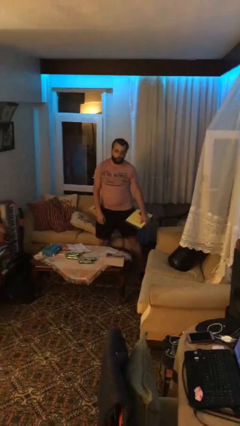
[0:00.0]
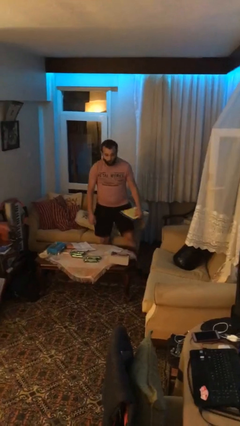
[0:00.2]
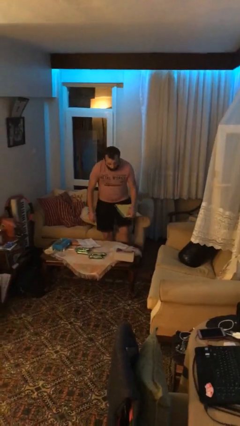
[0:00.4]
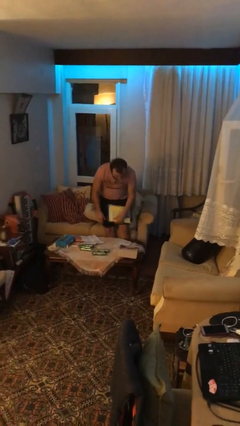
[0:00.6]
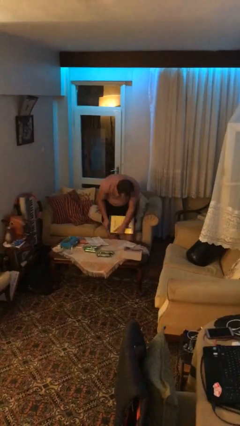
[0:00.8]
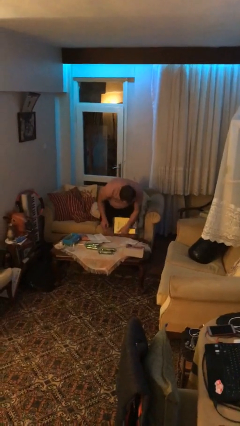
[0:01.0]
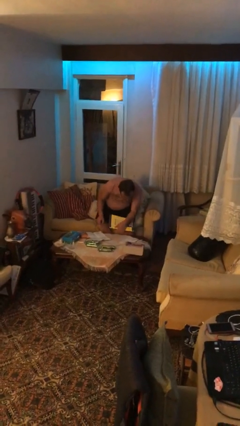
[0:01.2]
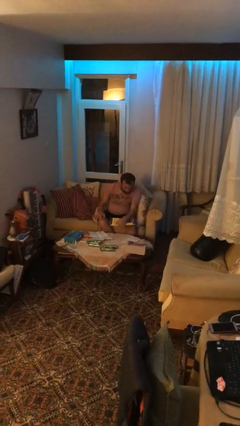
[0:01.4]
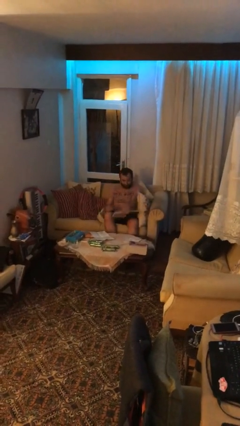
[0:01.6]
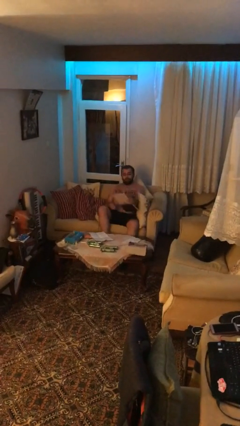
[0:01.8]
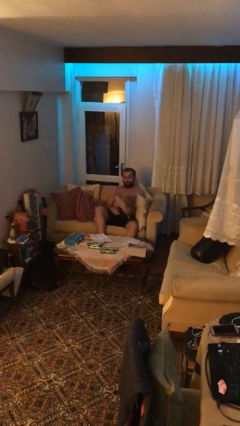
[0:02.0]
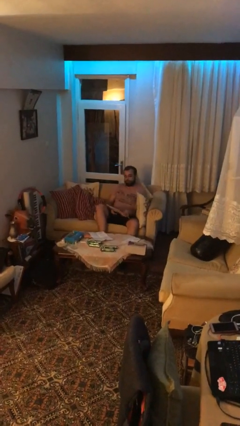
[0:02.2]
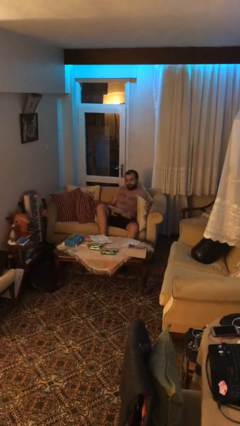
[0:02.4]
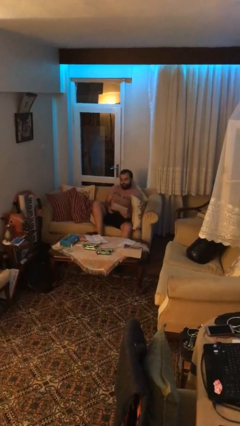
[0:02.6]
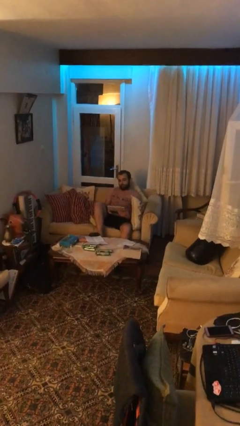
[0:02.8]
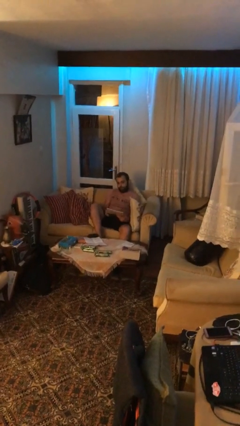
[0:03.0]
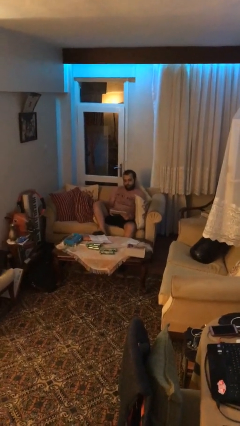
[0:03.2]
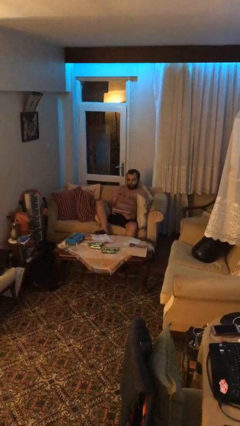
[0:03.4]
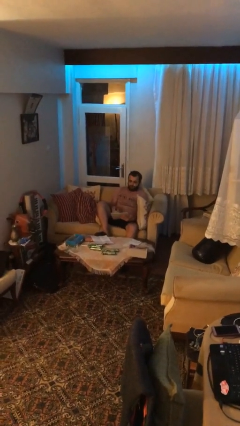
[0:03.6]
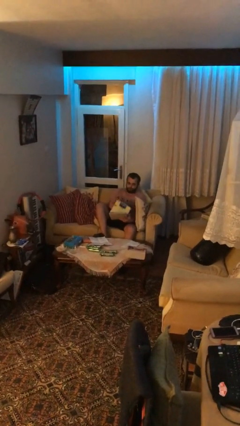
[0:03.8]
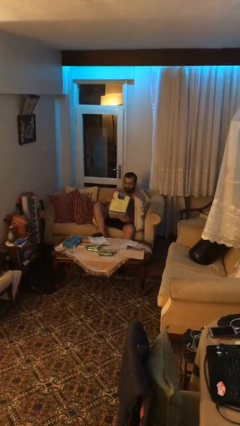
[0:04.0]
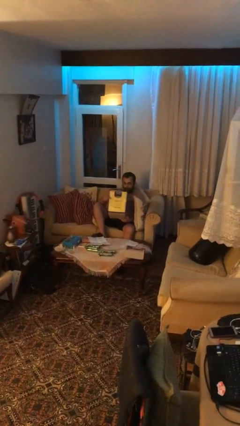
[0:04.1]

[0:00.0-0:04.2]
person sits down

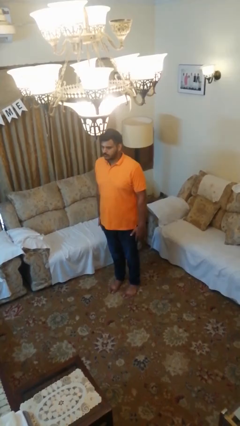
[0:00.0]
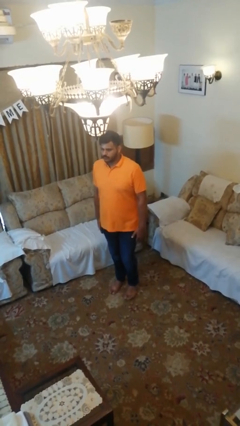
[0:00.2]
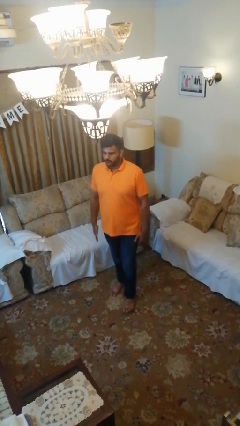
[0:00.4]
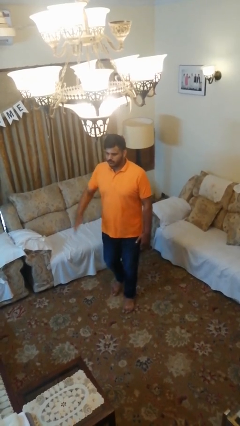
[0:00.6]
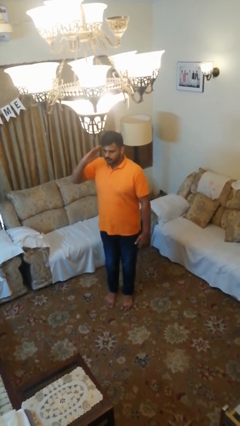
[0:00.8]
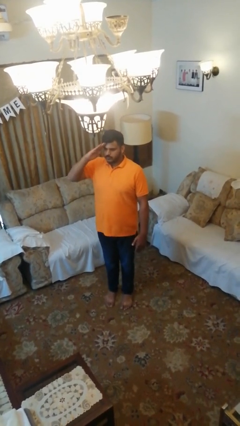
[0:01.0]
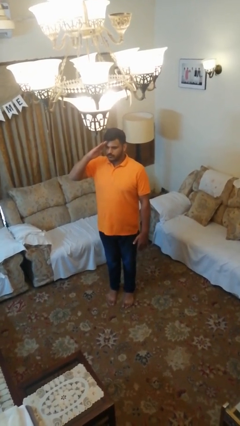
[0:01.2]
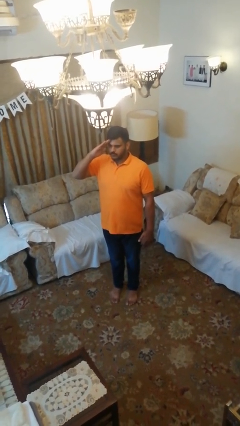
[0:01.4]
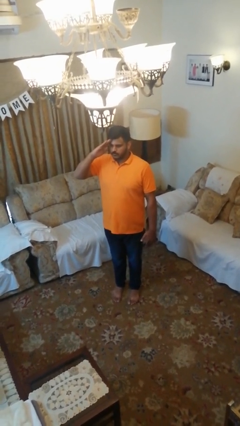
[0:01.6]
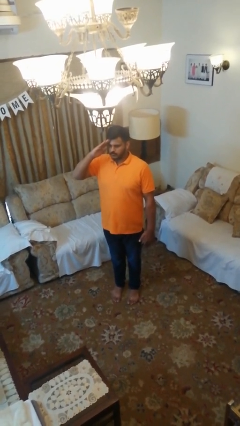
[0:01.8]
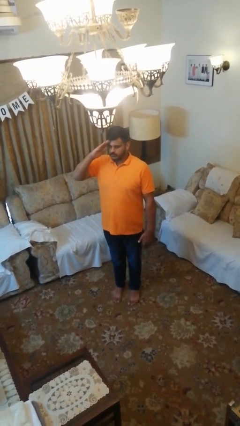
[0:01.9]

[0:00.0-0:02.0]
person salutes

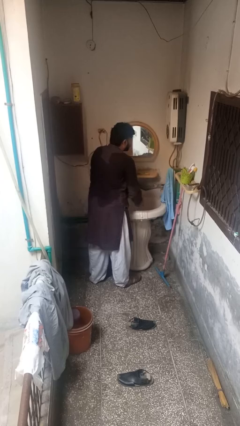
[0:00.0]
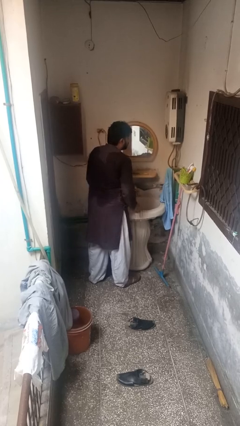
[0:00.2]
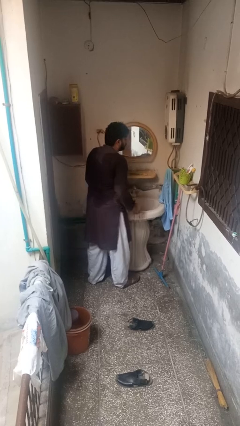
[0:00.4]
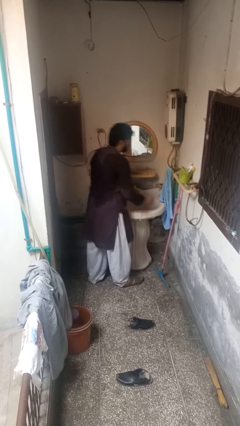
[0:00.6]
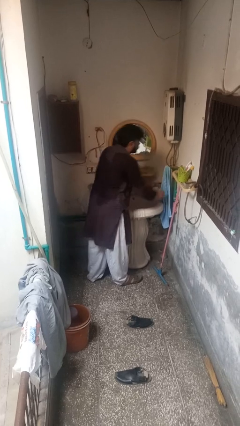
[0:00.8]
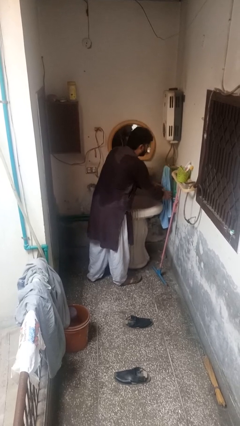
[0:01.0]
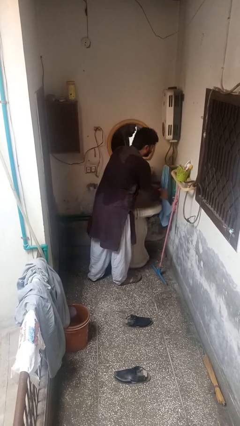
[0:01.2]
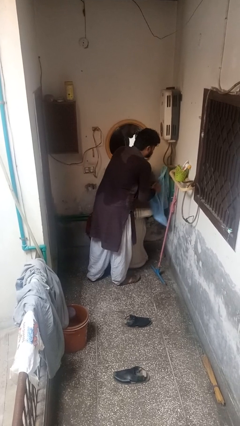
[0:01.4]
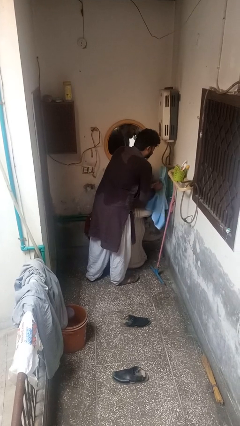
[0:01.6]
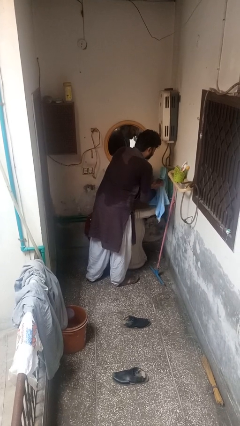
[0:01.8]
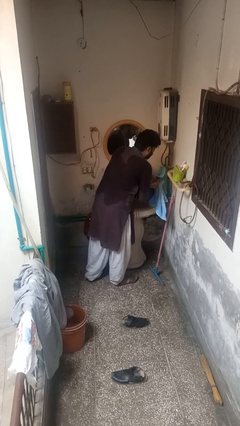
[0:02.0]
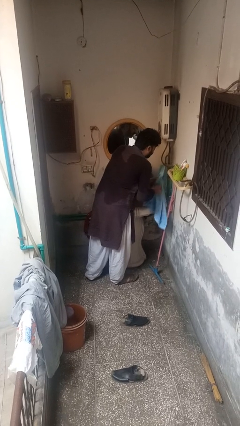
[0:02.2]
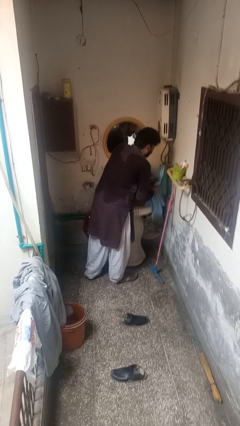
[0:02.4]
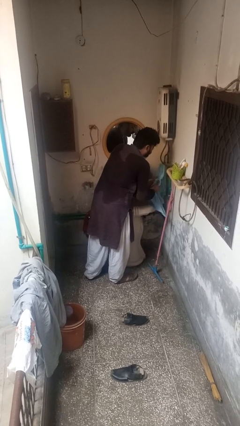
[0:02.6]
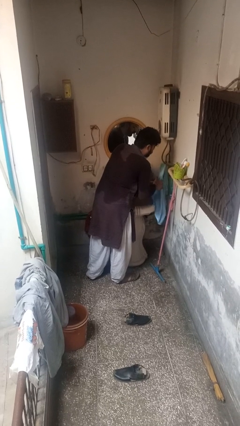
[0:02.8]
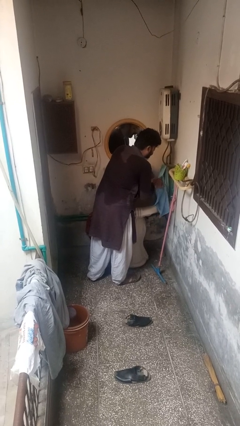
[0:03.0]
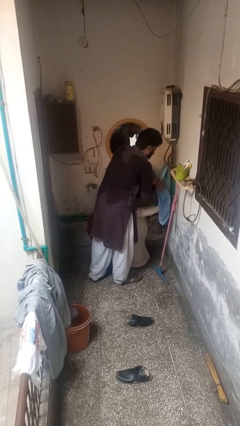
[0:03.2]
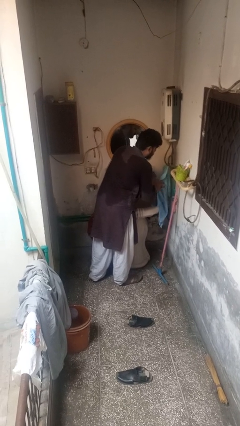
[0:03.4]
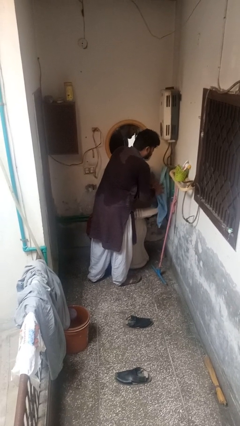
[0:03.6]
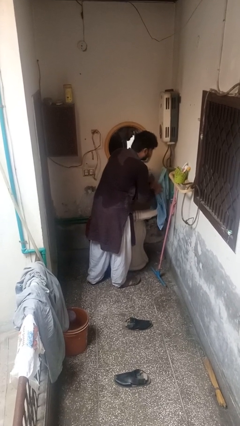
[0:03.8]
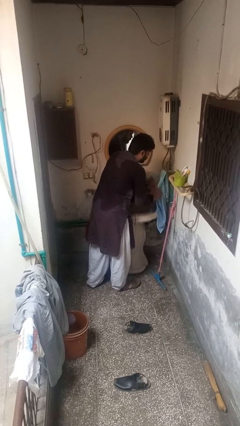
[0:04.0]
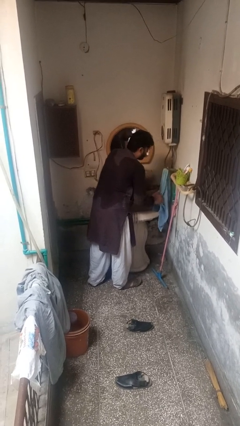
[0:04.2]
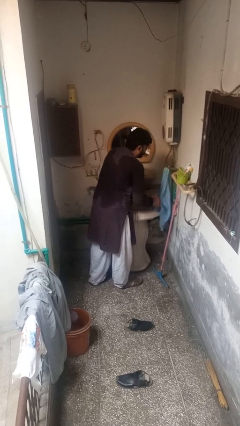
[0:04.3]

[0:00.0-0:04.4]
person dries hands with towel

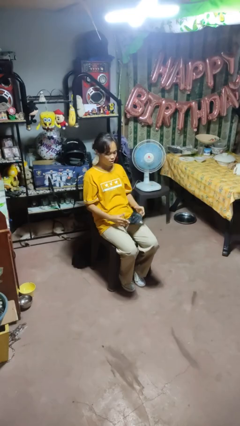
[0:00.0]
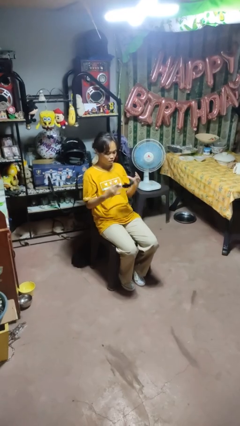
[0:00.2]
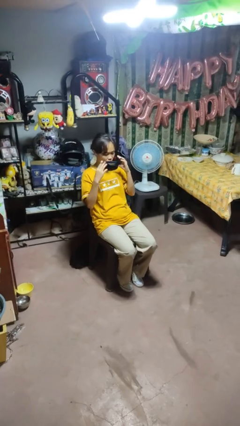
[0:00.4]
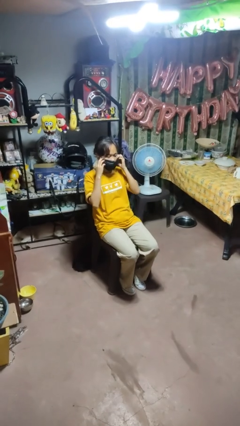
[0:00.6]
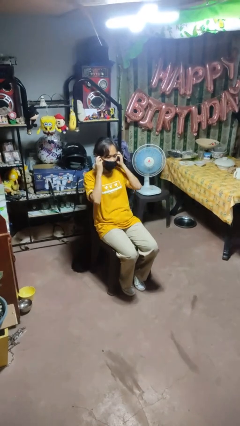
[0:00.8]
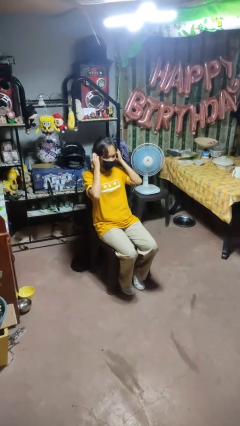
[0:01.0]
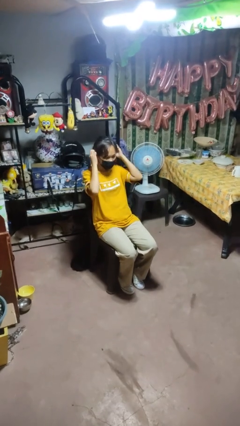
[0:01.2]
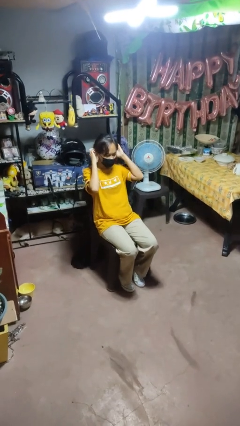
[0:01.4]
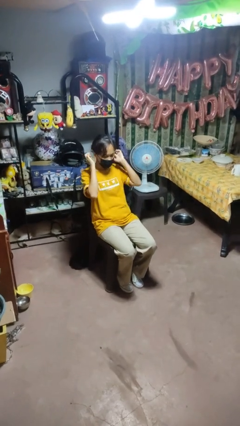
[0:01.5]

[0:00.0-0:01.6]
person puts on facemask

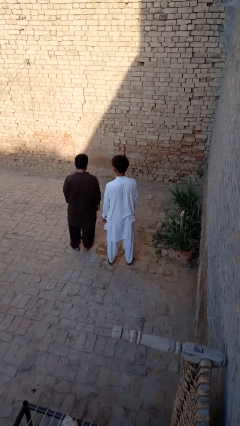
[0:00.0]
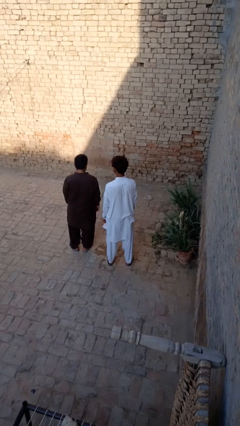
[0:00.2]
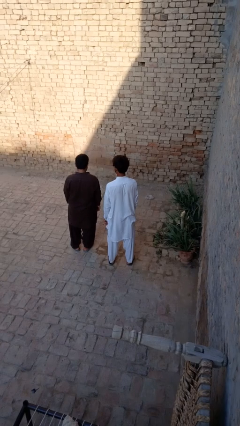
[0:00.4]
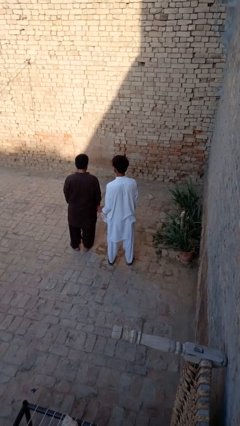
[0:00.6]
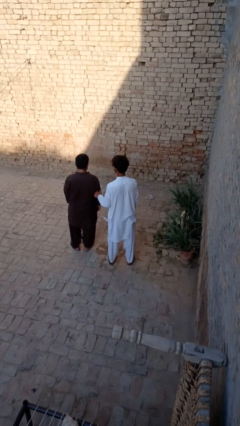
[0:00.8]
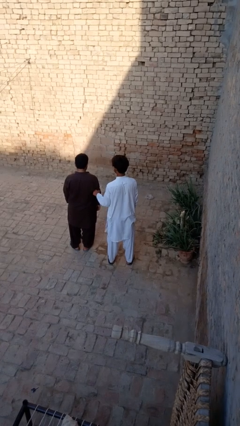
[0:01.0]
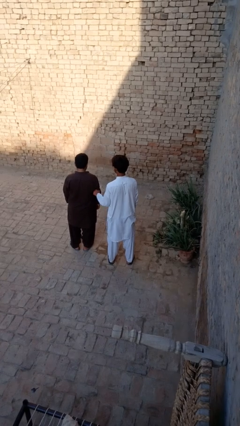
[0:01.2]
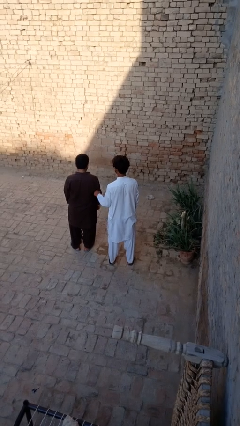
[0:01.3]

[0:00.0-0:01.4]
person tickles person

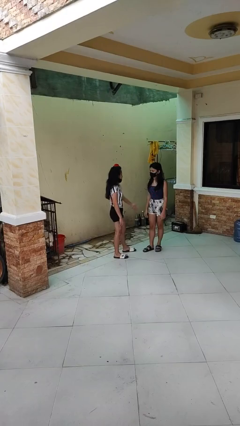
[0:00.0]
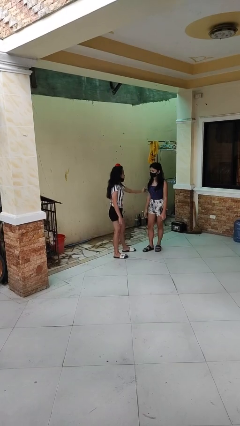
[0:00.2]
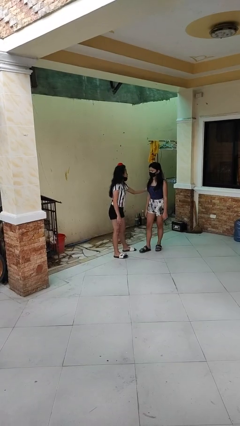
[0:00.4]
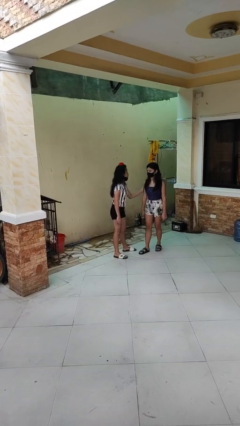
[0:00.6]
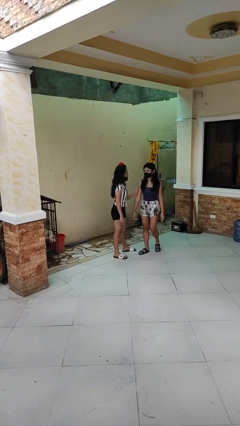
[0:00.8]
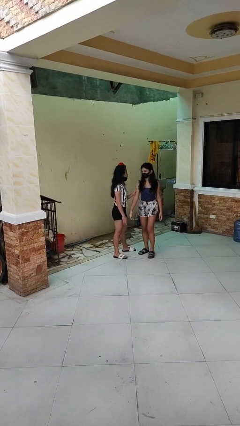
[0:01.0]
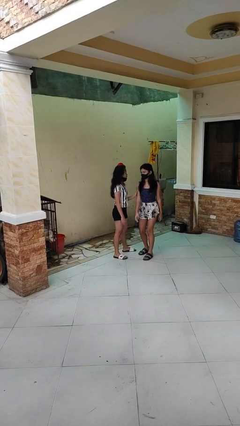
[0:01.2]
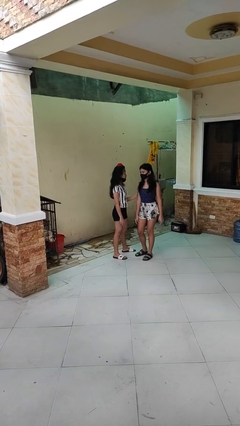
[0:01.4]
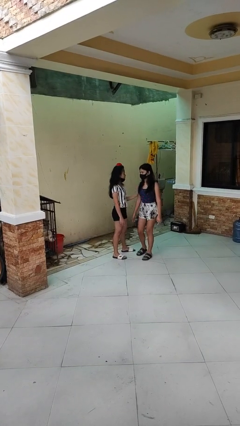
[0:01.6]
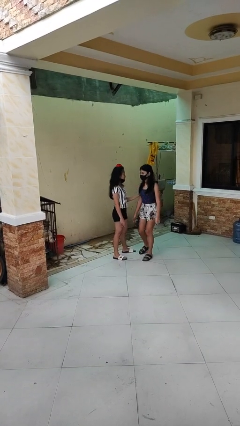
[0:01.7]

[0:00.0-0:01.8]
person grabs person by bicep

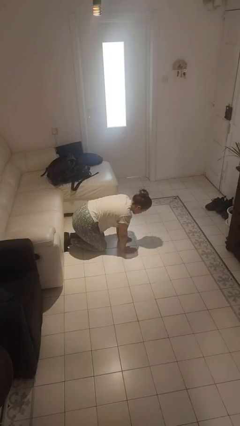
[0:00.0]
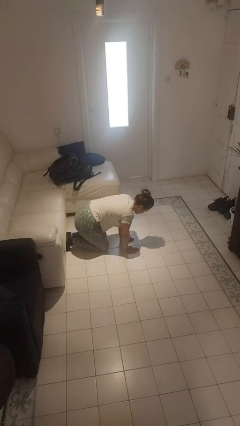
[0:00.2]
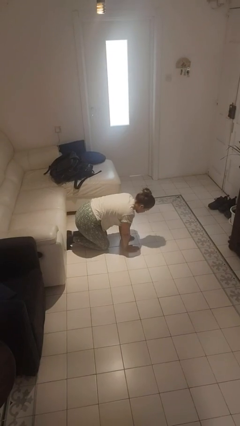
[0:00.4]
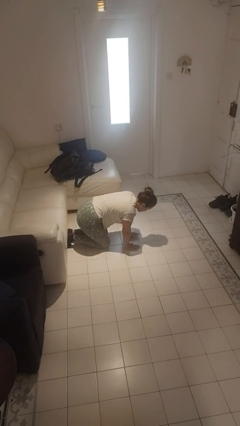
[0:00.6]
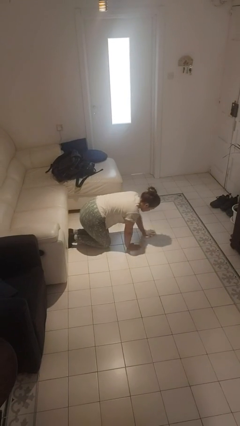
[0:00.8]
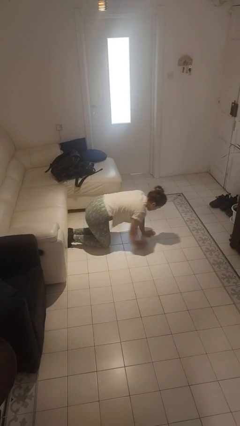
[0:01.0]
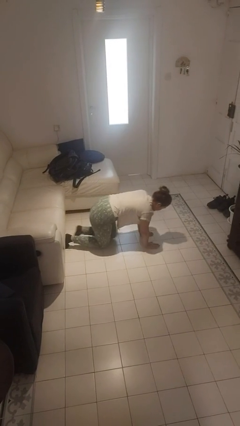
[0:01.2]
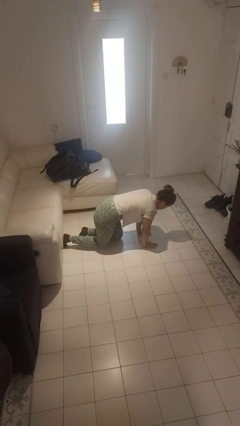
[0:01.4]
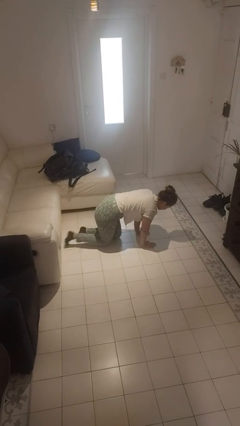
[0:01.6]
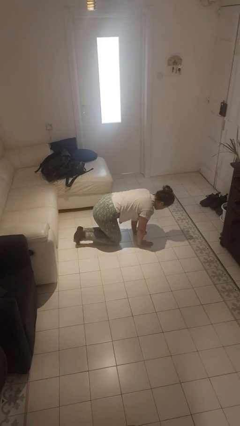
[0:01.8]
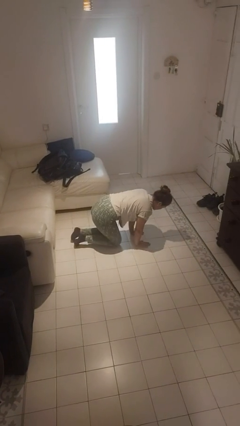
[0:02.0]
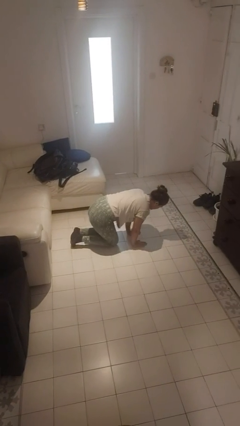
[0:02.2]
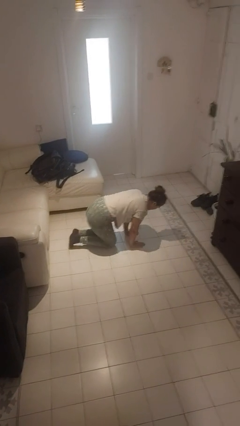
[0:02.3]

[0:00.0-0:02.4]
person crawls
